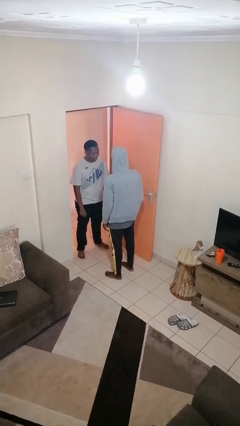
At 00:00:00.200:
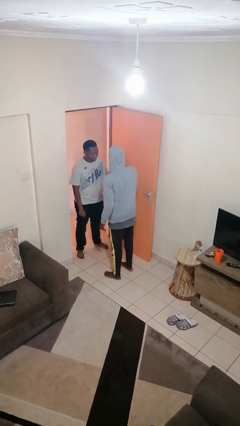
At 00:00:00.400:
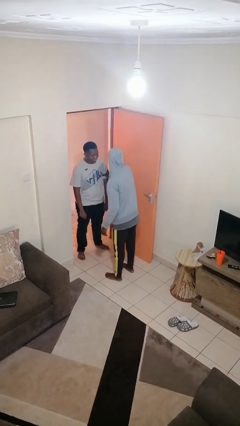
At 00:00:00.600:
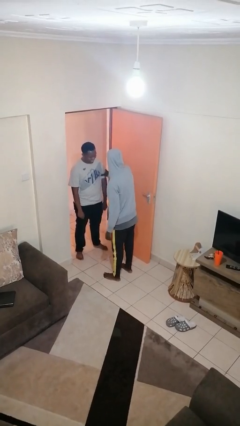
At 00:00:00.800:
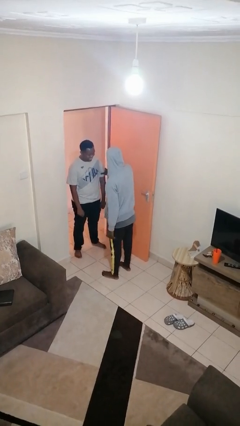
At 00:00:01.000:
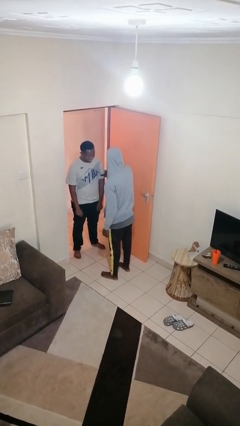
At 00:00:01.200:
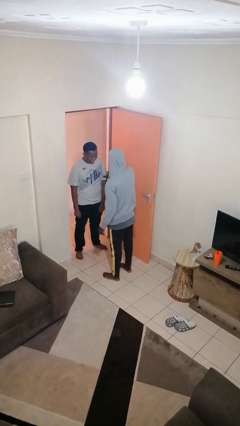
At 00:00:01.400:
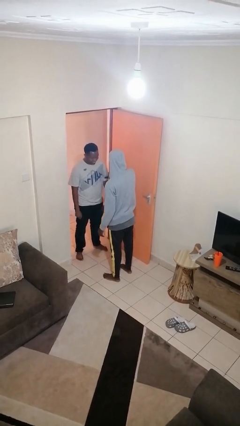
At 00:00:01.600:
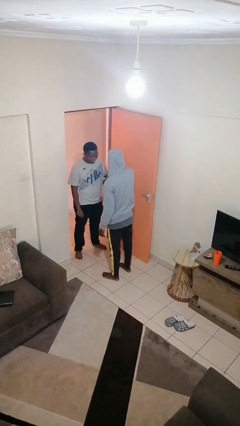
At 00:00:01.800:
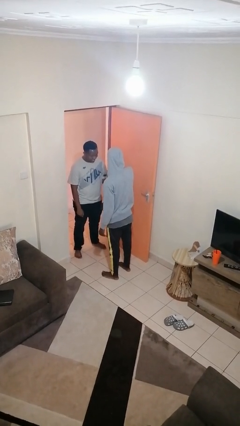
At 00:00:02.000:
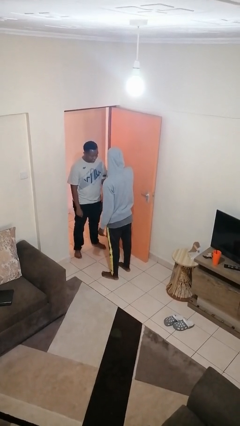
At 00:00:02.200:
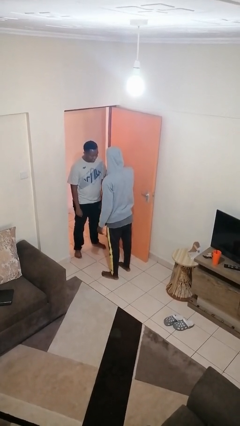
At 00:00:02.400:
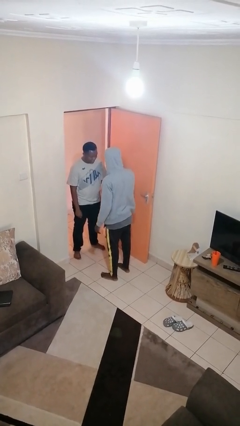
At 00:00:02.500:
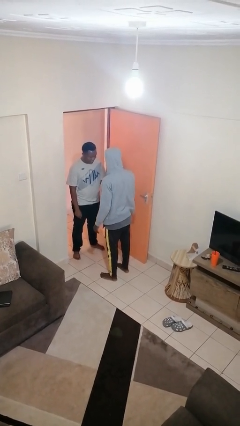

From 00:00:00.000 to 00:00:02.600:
person grabs person by bicep

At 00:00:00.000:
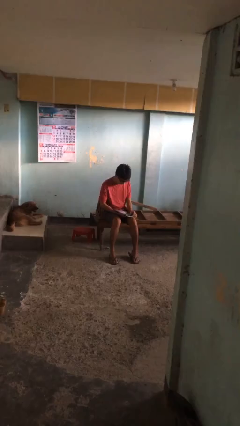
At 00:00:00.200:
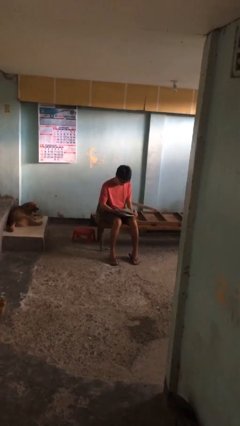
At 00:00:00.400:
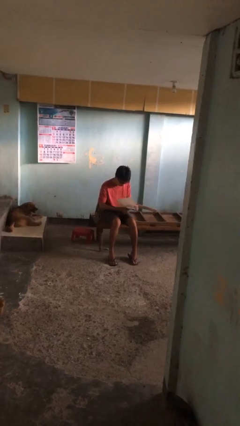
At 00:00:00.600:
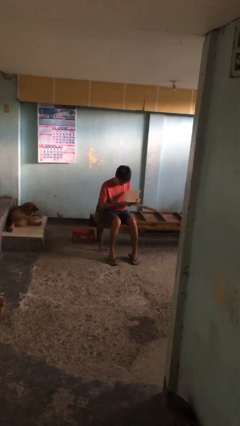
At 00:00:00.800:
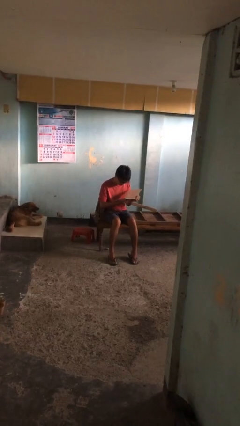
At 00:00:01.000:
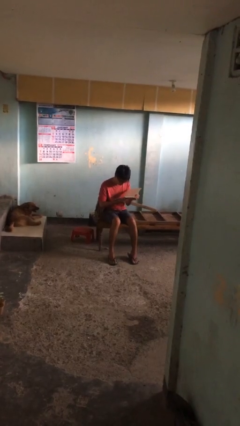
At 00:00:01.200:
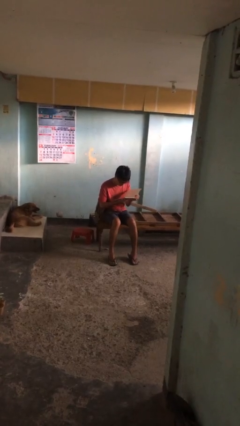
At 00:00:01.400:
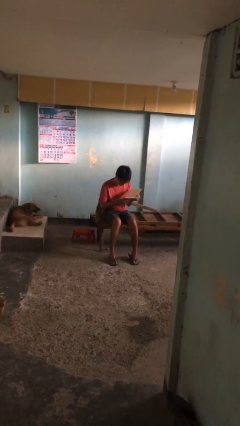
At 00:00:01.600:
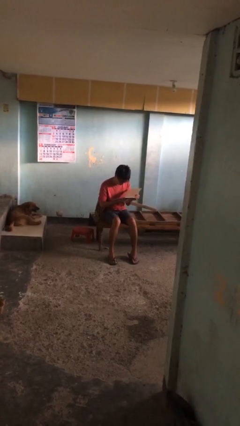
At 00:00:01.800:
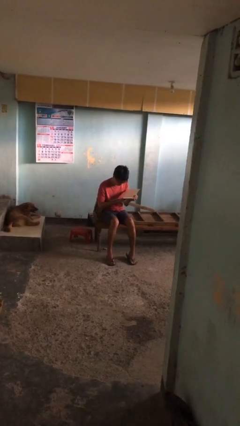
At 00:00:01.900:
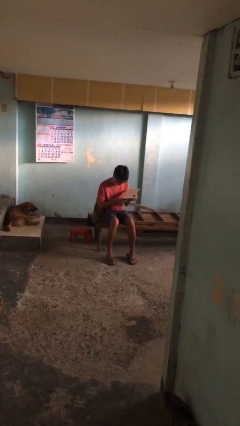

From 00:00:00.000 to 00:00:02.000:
person reads document

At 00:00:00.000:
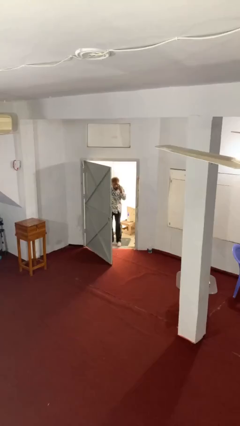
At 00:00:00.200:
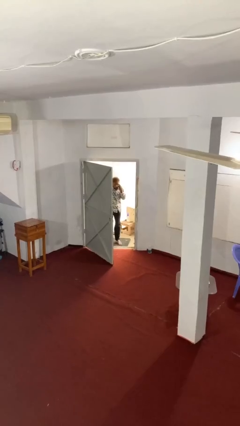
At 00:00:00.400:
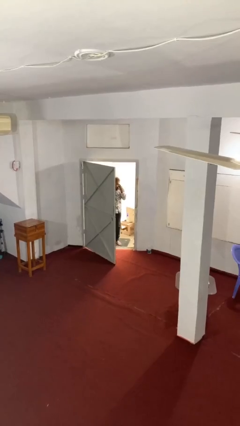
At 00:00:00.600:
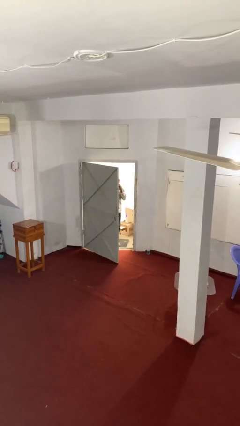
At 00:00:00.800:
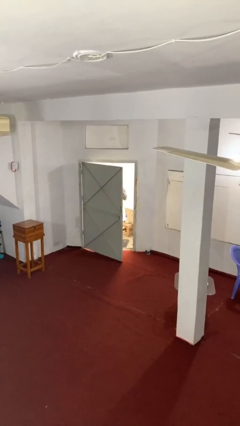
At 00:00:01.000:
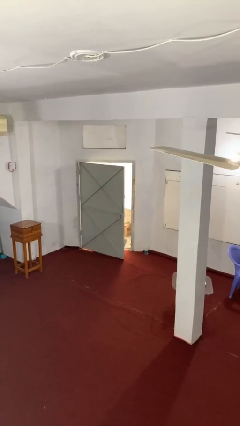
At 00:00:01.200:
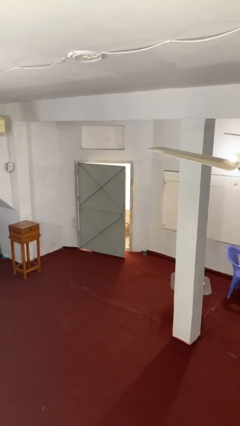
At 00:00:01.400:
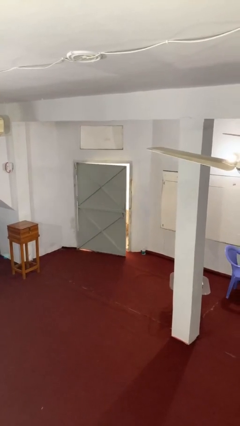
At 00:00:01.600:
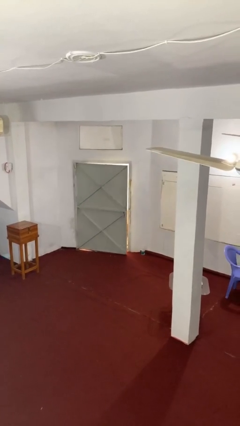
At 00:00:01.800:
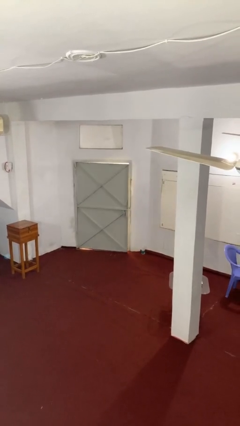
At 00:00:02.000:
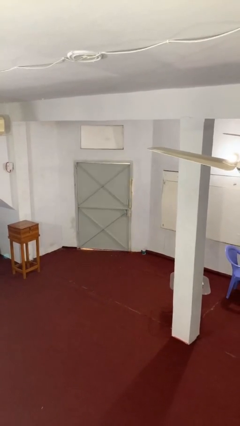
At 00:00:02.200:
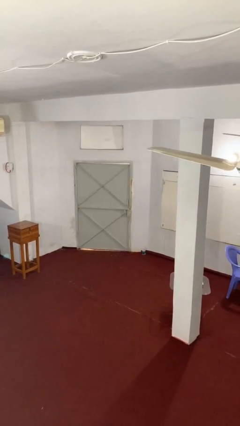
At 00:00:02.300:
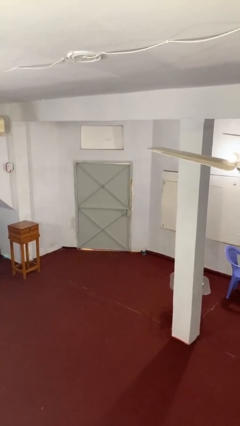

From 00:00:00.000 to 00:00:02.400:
person closes facility door

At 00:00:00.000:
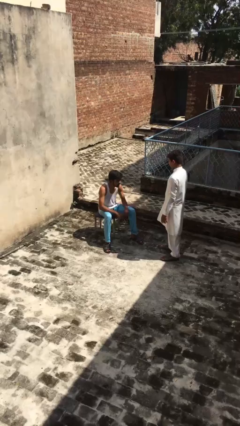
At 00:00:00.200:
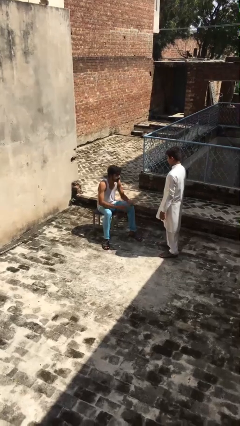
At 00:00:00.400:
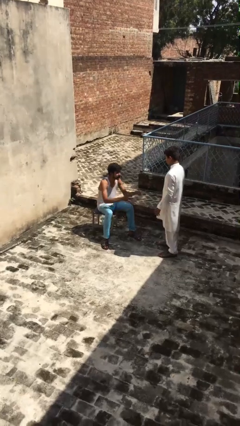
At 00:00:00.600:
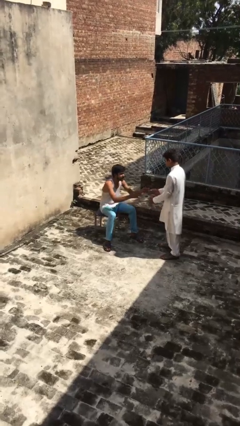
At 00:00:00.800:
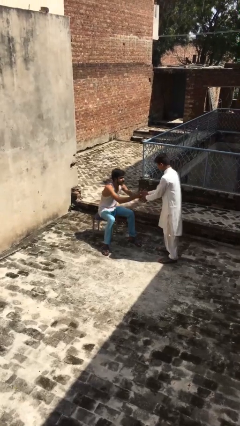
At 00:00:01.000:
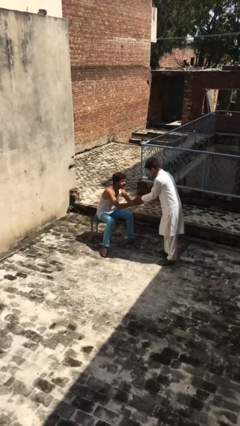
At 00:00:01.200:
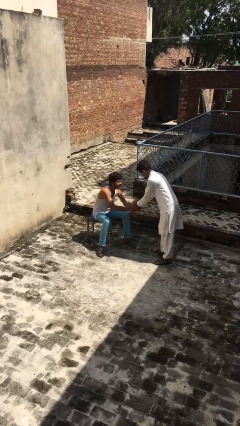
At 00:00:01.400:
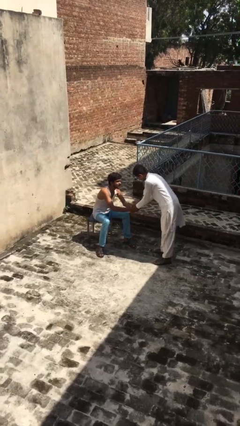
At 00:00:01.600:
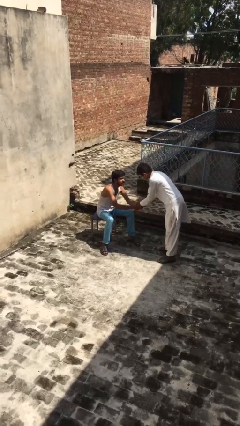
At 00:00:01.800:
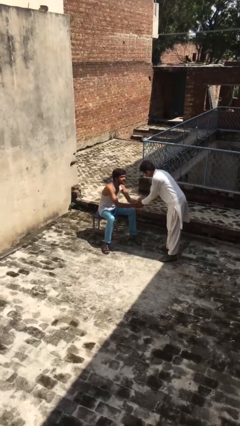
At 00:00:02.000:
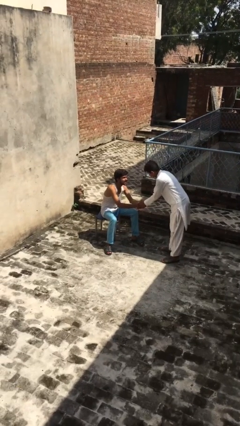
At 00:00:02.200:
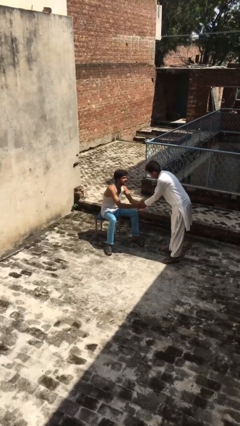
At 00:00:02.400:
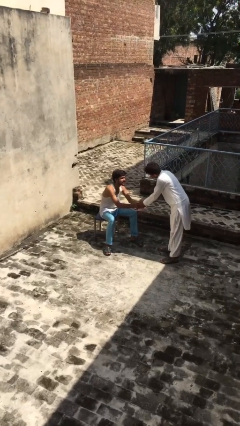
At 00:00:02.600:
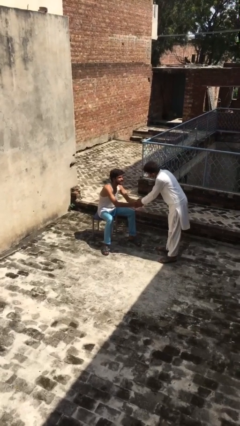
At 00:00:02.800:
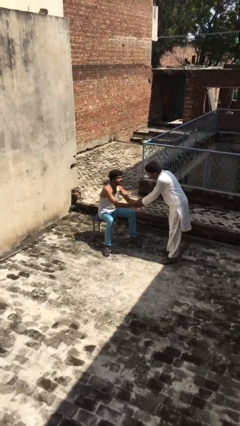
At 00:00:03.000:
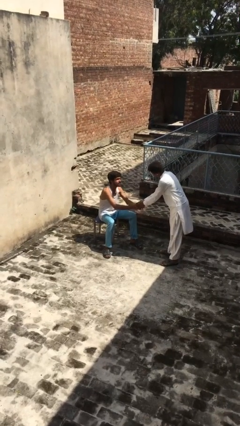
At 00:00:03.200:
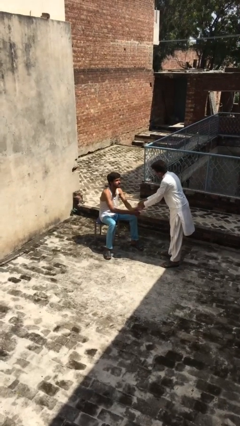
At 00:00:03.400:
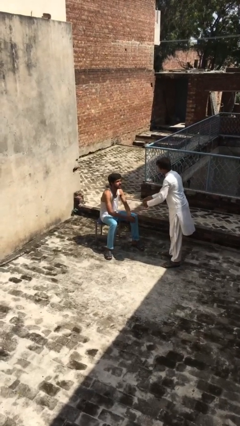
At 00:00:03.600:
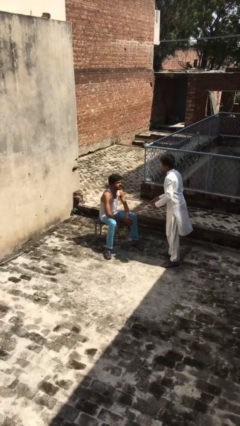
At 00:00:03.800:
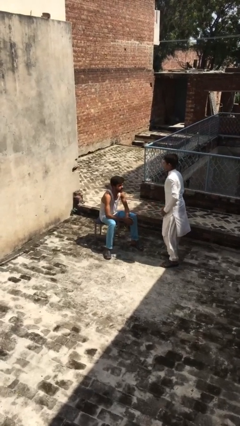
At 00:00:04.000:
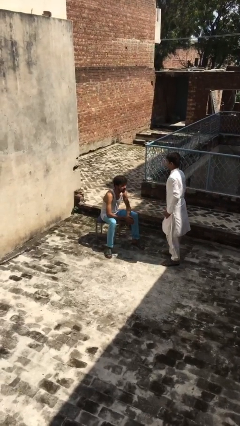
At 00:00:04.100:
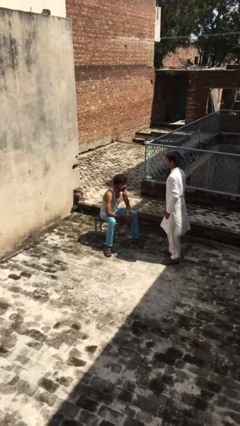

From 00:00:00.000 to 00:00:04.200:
person shakes hand

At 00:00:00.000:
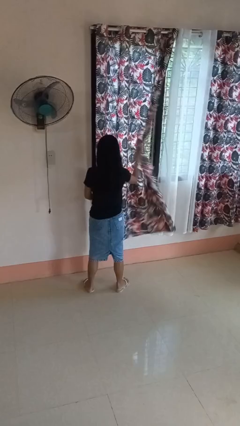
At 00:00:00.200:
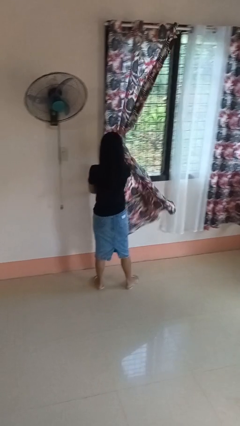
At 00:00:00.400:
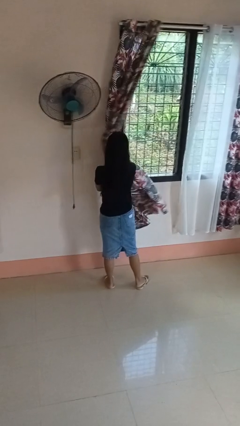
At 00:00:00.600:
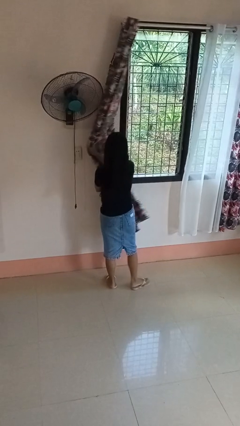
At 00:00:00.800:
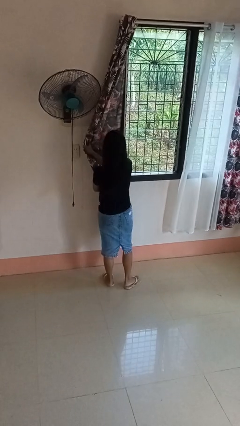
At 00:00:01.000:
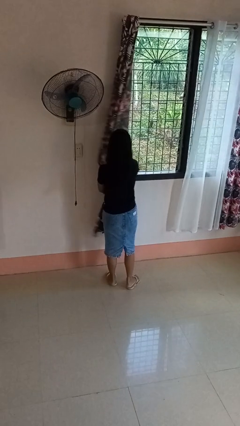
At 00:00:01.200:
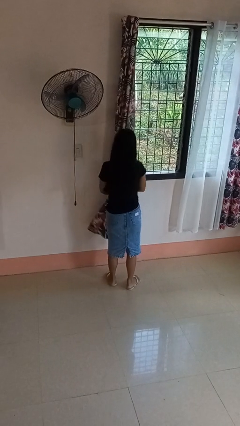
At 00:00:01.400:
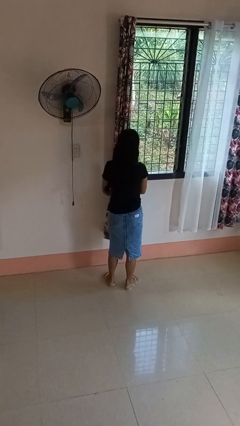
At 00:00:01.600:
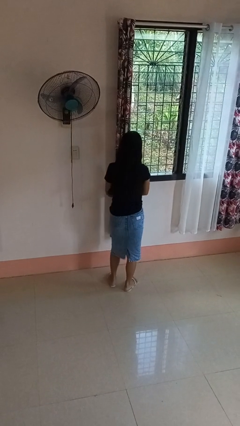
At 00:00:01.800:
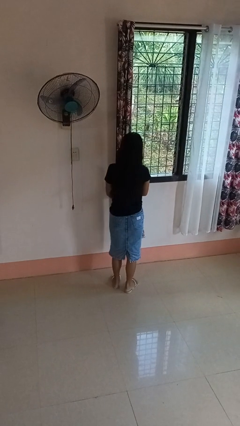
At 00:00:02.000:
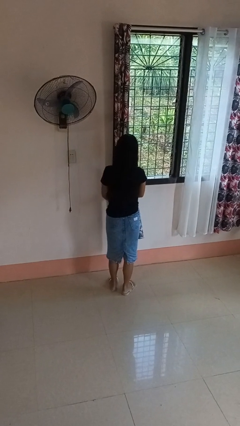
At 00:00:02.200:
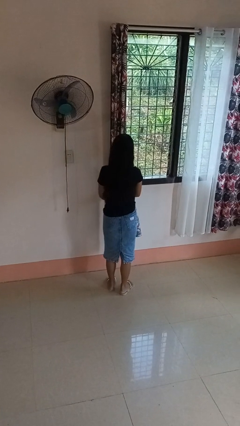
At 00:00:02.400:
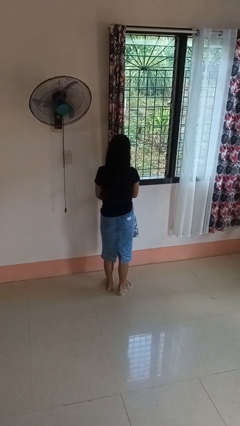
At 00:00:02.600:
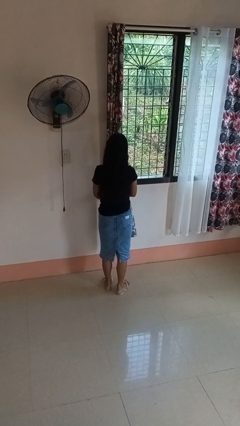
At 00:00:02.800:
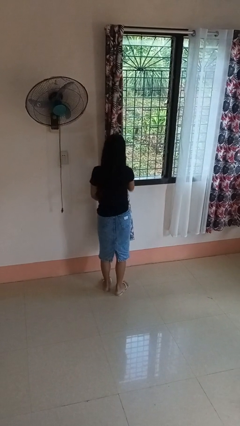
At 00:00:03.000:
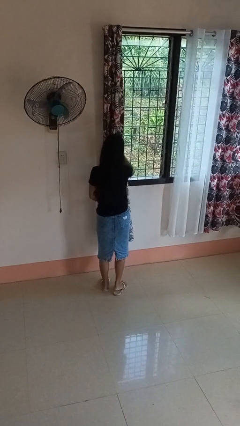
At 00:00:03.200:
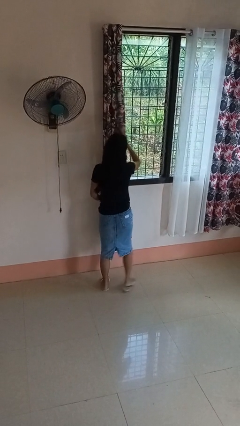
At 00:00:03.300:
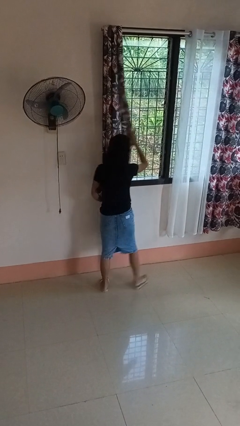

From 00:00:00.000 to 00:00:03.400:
person opens curtains

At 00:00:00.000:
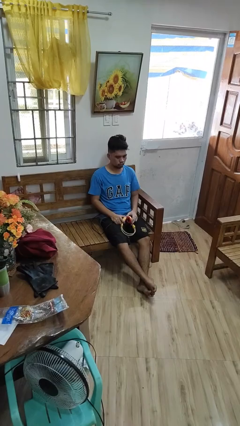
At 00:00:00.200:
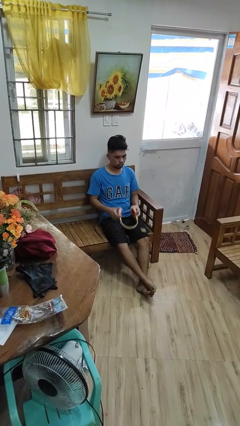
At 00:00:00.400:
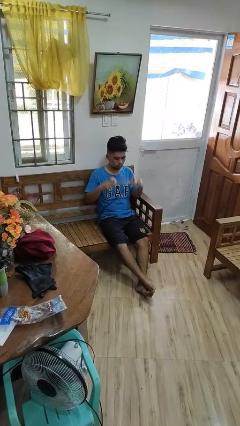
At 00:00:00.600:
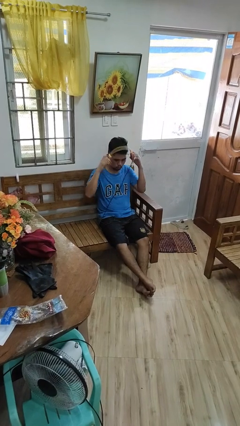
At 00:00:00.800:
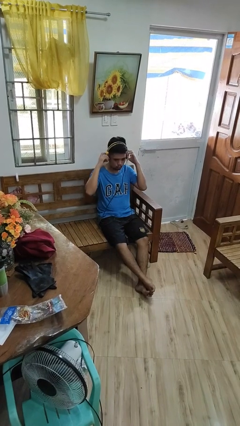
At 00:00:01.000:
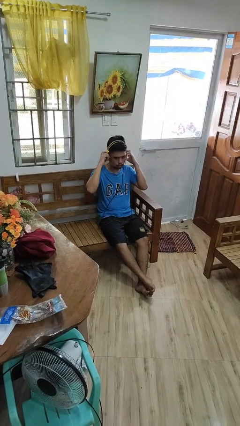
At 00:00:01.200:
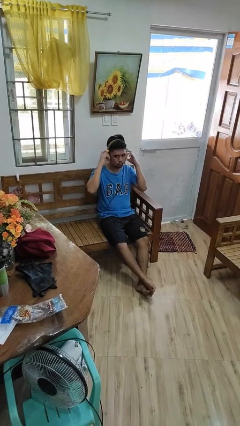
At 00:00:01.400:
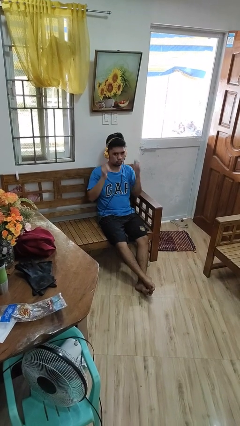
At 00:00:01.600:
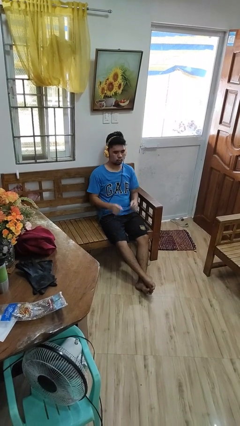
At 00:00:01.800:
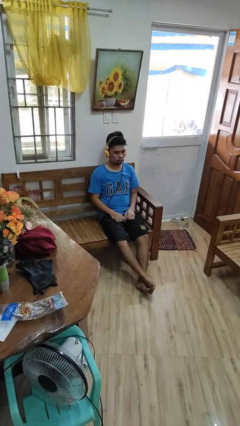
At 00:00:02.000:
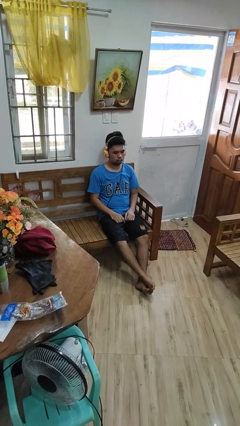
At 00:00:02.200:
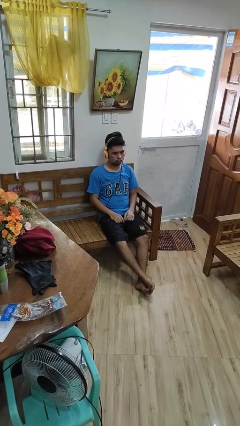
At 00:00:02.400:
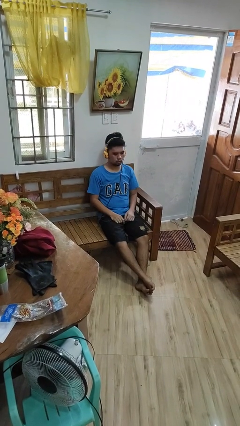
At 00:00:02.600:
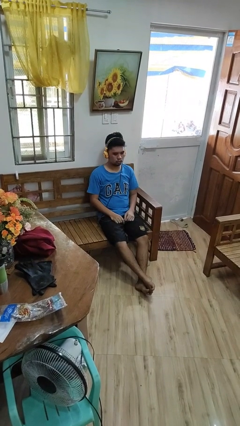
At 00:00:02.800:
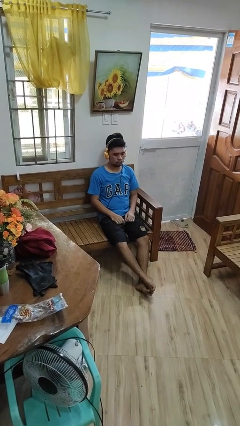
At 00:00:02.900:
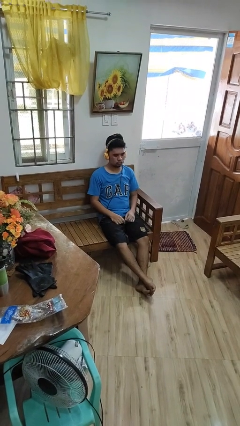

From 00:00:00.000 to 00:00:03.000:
person puts on headphones

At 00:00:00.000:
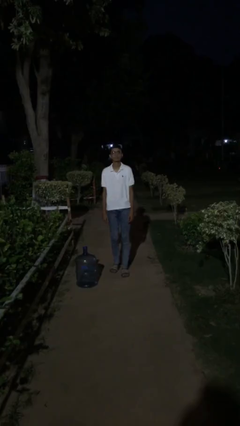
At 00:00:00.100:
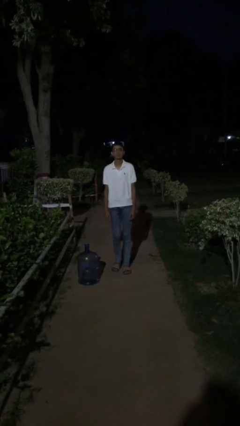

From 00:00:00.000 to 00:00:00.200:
person carries heavy object
